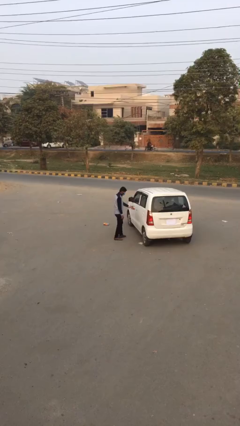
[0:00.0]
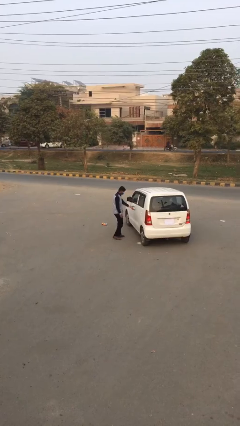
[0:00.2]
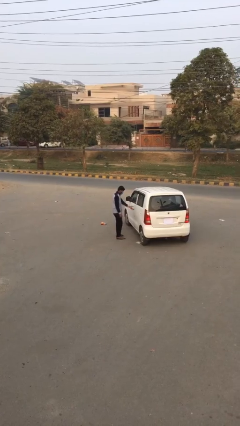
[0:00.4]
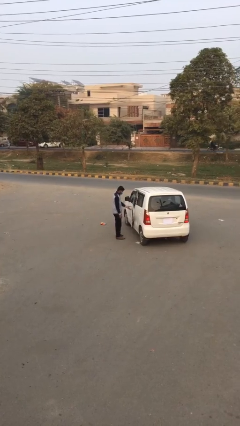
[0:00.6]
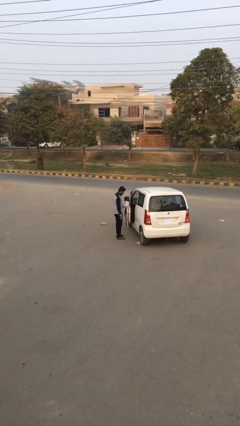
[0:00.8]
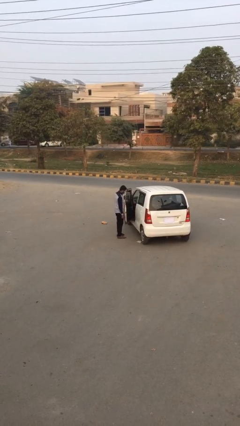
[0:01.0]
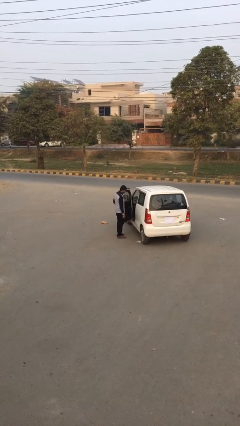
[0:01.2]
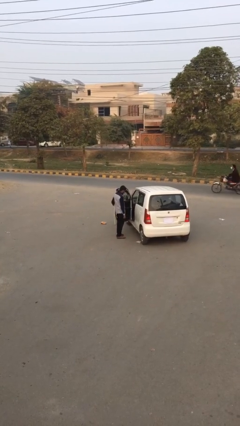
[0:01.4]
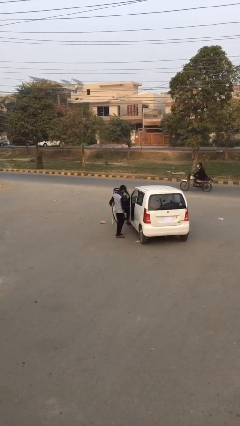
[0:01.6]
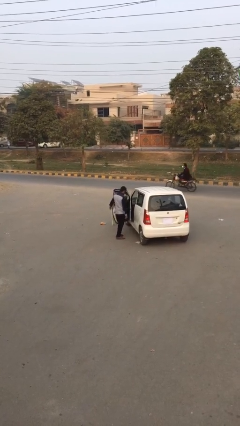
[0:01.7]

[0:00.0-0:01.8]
person opens car door

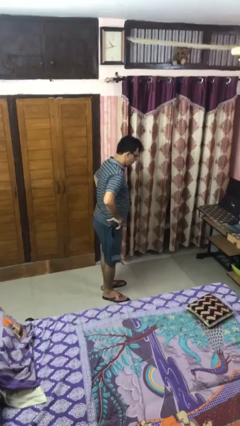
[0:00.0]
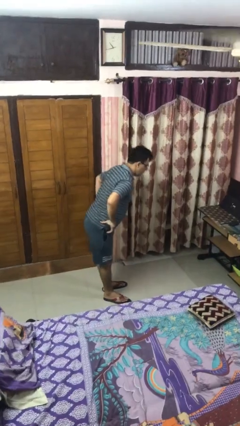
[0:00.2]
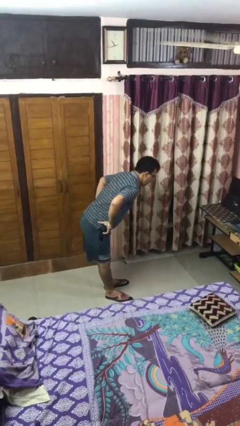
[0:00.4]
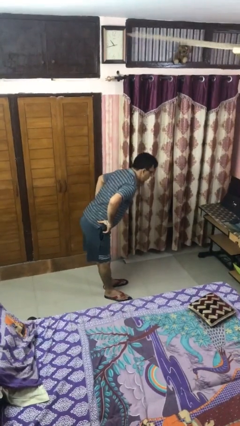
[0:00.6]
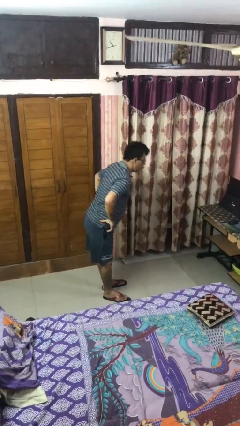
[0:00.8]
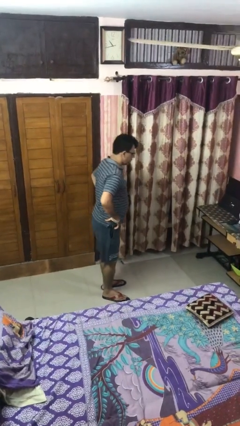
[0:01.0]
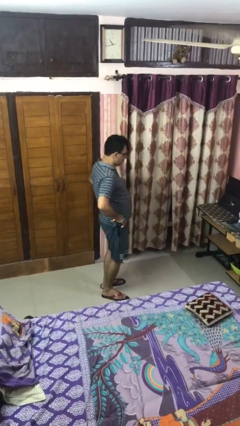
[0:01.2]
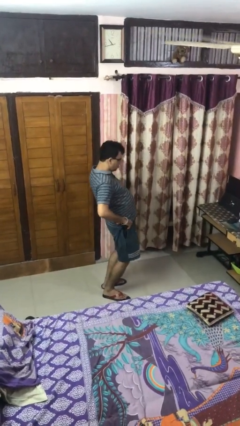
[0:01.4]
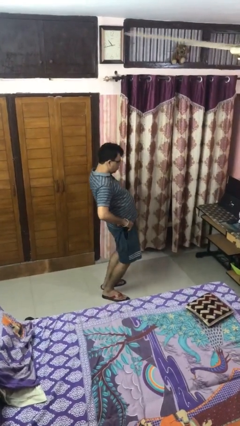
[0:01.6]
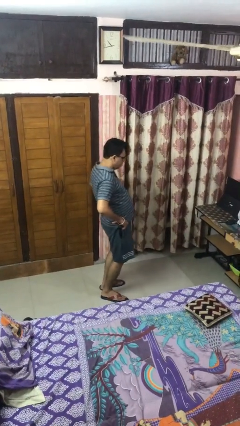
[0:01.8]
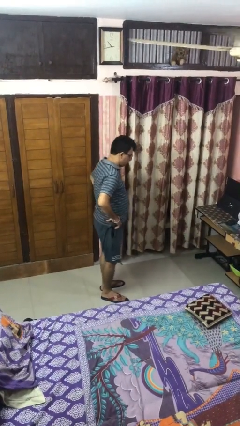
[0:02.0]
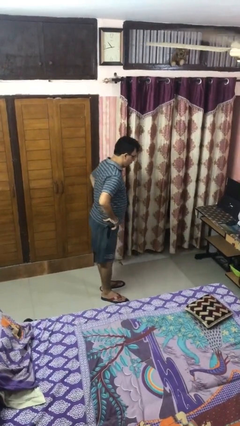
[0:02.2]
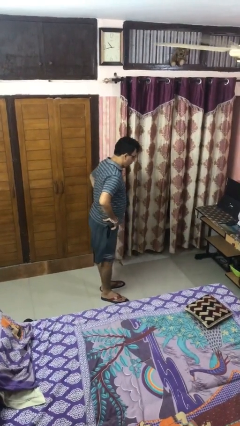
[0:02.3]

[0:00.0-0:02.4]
person wiggles hips

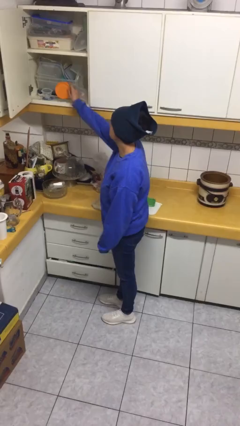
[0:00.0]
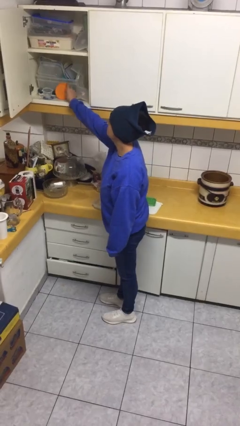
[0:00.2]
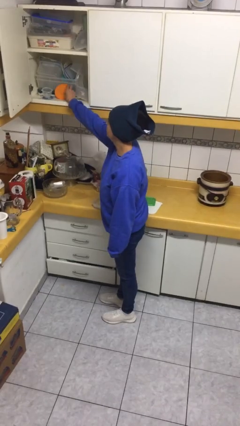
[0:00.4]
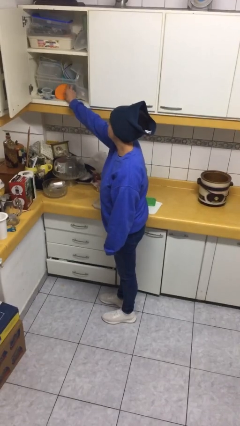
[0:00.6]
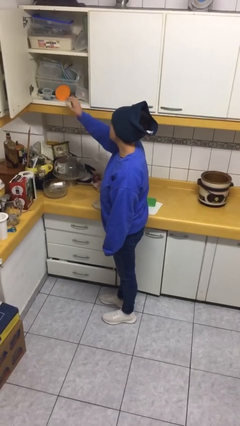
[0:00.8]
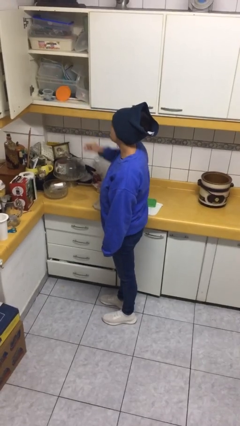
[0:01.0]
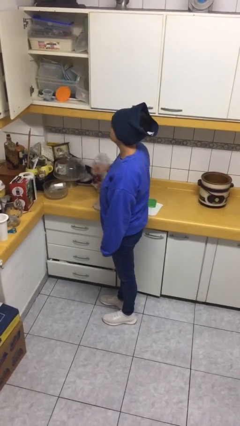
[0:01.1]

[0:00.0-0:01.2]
person puts object in cabinet

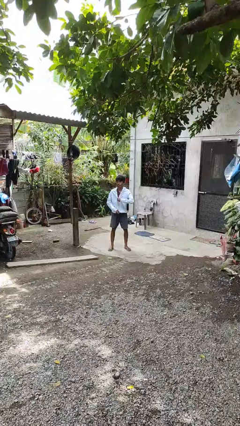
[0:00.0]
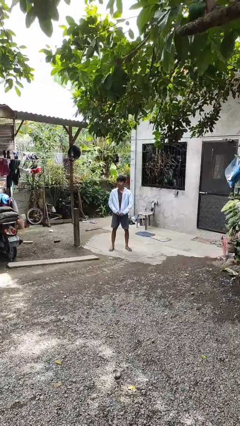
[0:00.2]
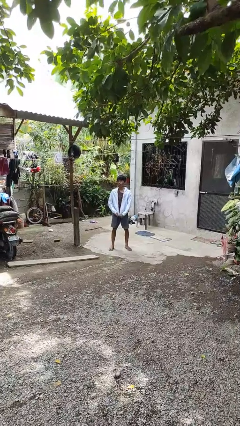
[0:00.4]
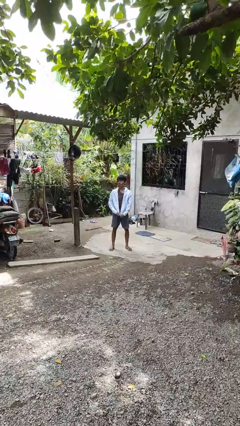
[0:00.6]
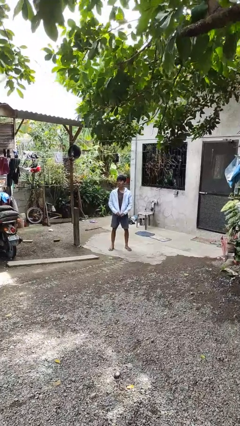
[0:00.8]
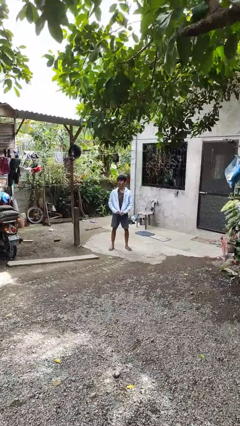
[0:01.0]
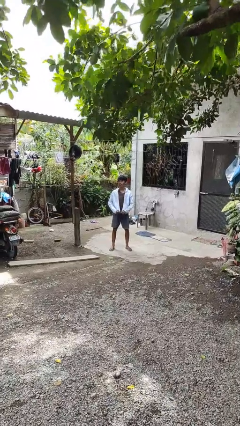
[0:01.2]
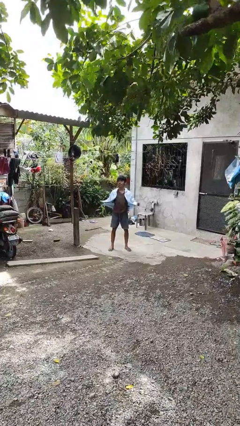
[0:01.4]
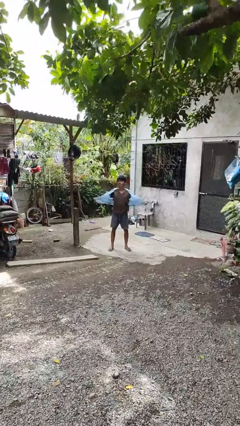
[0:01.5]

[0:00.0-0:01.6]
person unzips jacket

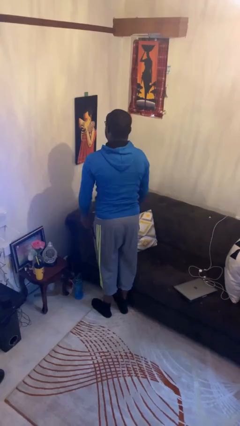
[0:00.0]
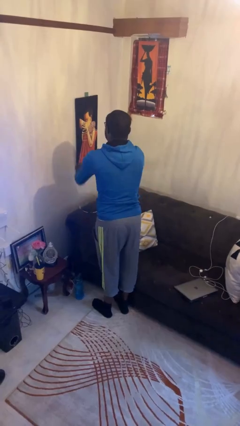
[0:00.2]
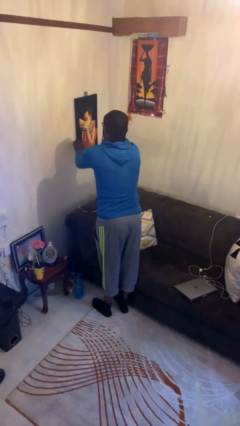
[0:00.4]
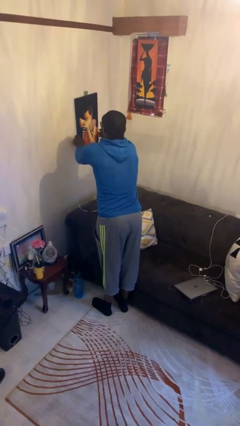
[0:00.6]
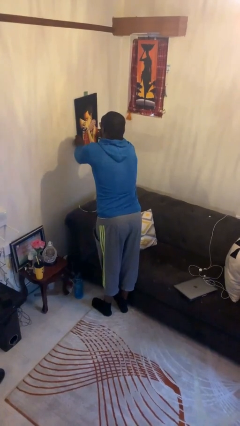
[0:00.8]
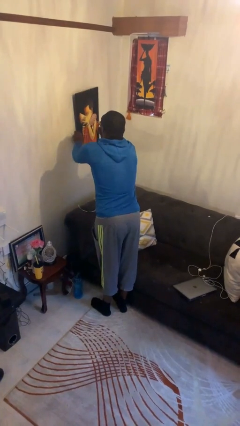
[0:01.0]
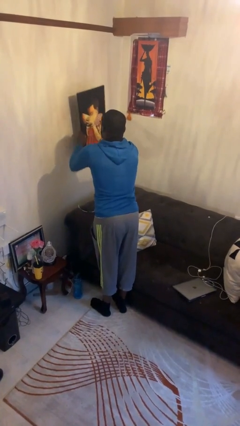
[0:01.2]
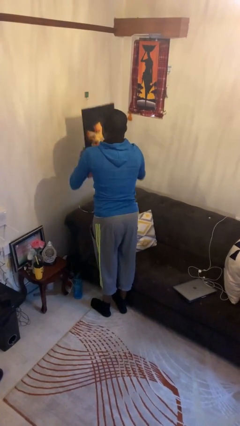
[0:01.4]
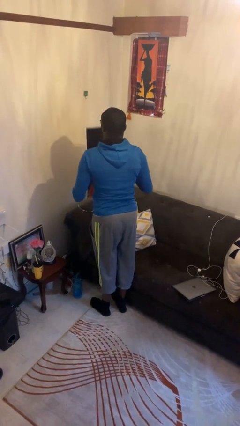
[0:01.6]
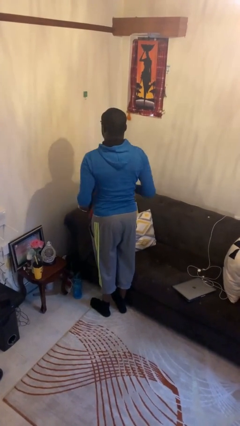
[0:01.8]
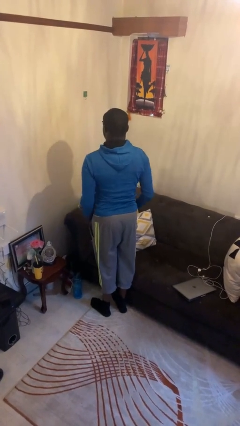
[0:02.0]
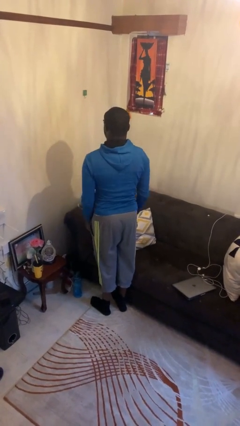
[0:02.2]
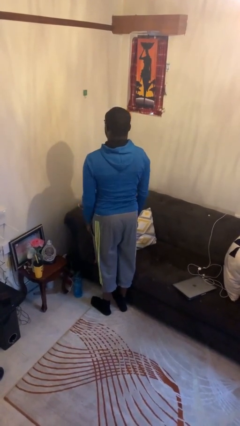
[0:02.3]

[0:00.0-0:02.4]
person takes down picture frame

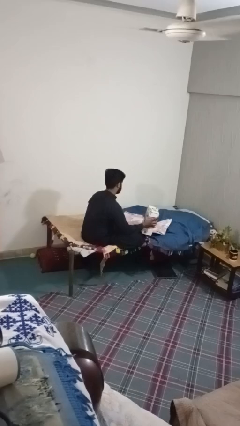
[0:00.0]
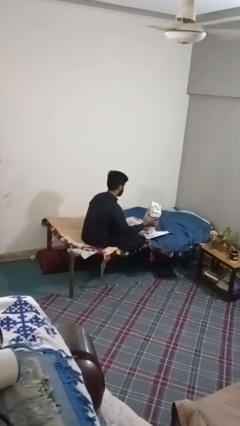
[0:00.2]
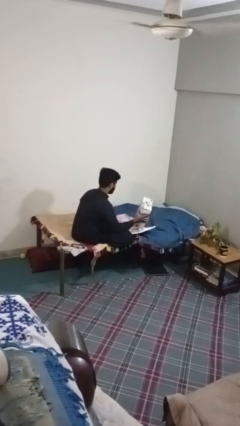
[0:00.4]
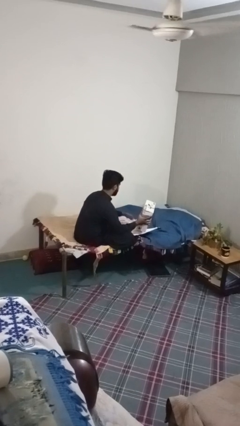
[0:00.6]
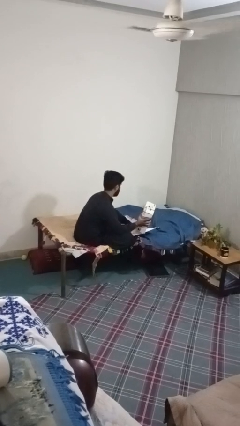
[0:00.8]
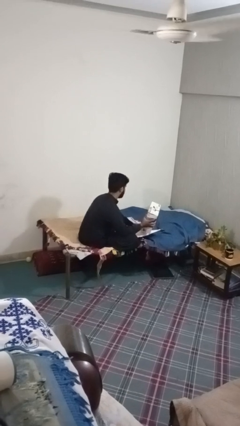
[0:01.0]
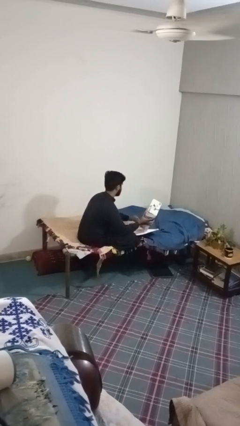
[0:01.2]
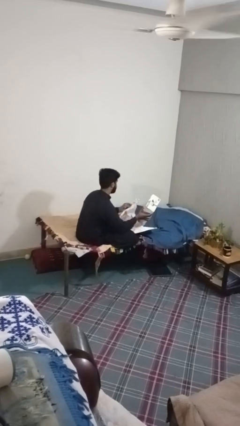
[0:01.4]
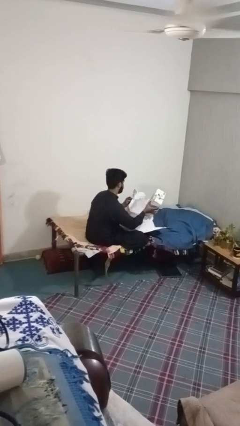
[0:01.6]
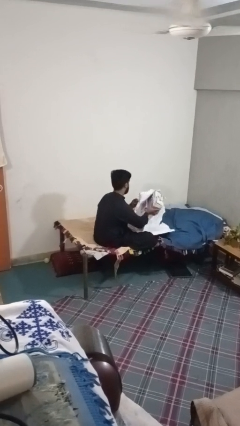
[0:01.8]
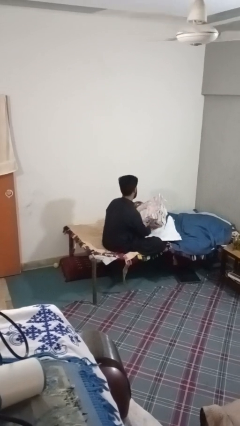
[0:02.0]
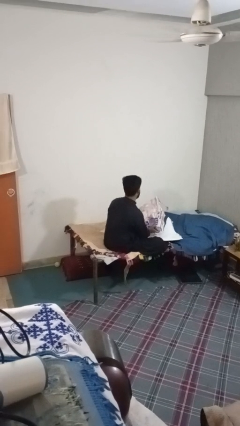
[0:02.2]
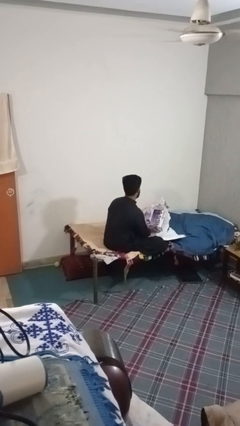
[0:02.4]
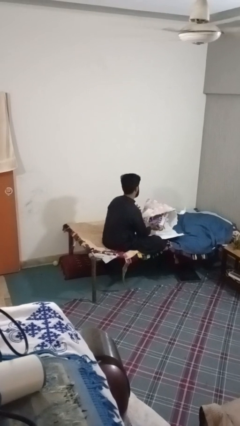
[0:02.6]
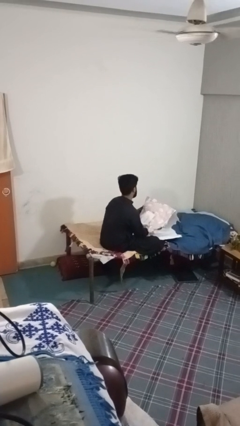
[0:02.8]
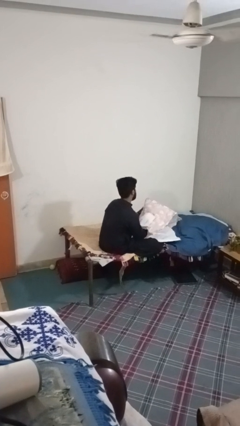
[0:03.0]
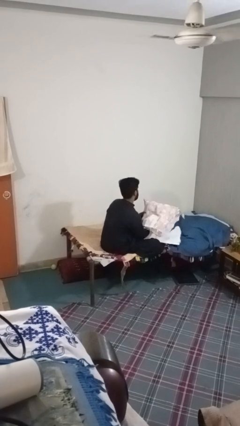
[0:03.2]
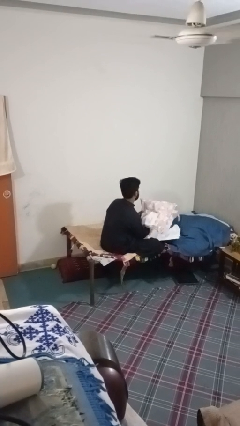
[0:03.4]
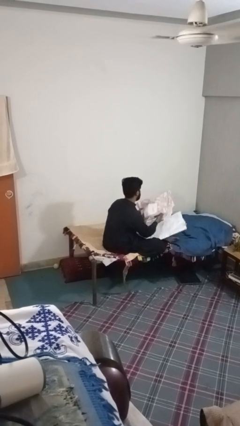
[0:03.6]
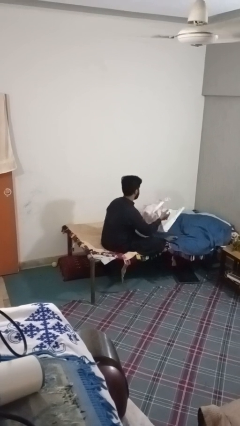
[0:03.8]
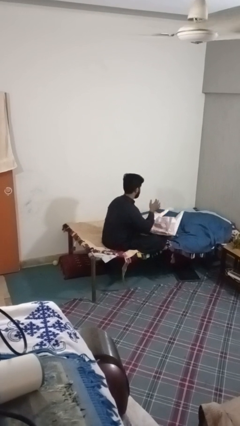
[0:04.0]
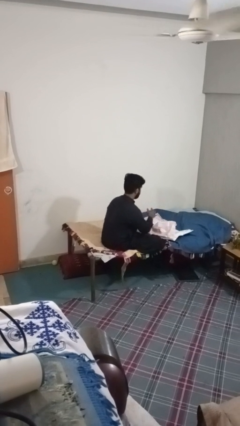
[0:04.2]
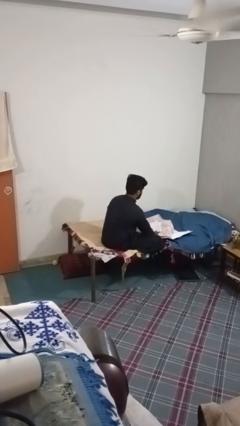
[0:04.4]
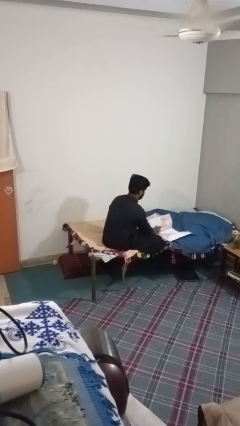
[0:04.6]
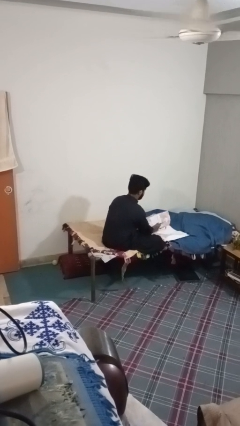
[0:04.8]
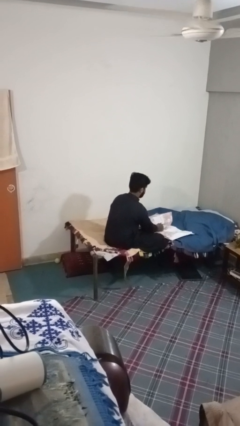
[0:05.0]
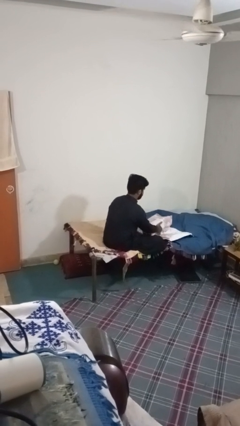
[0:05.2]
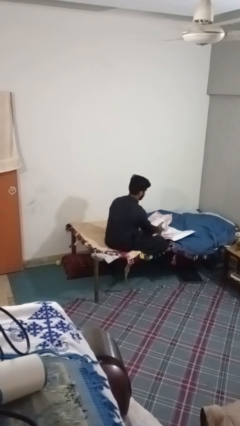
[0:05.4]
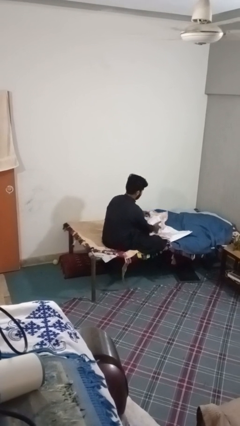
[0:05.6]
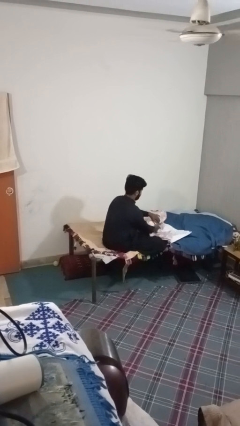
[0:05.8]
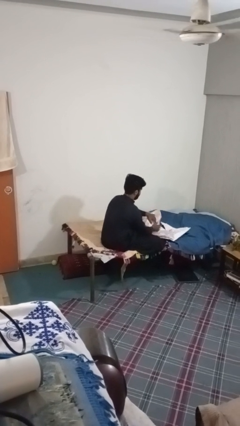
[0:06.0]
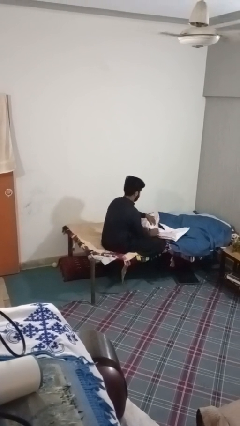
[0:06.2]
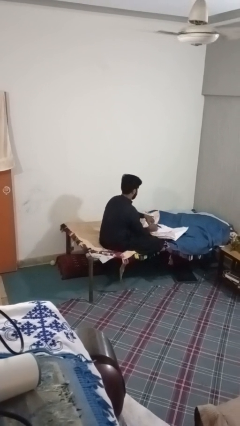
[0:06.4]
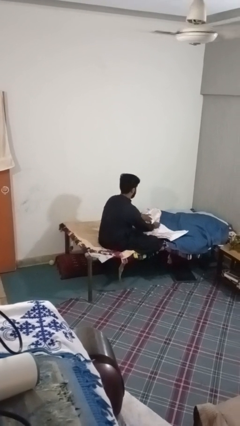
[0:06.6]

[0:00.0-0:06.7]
person wraps box

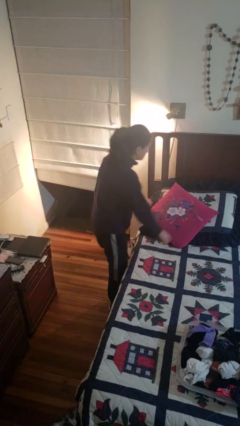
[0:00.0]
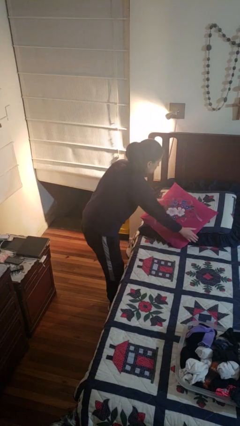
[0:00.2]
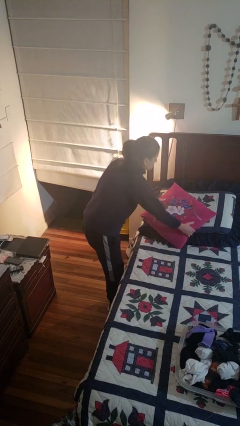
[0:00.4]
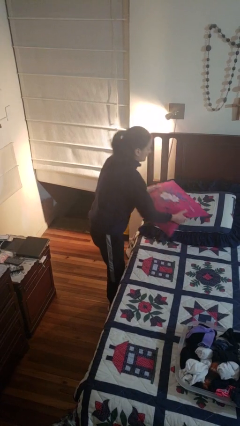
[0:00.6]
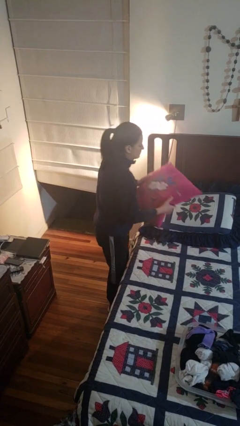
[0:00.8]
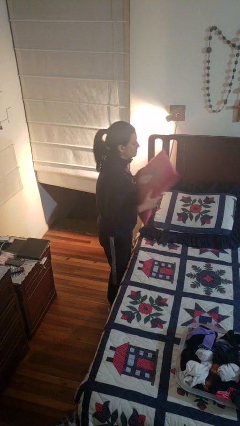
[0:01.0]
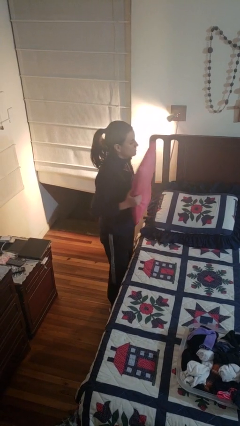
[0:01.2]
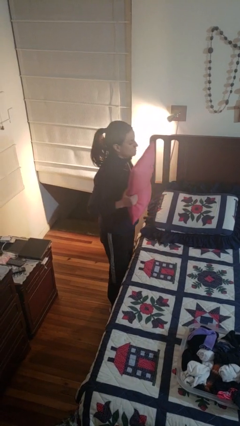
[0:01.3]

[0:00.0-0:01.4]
person picks up object from bed
